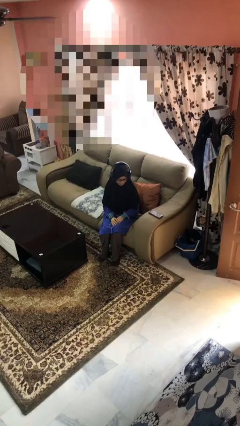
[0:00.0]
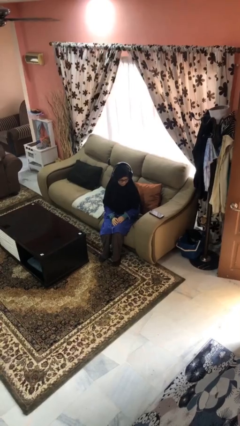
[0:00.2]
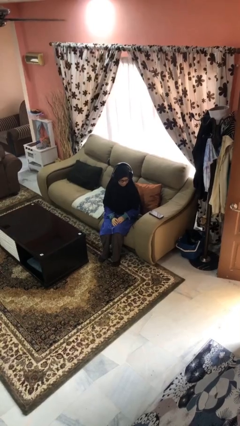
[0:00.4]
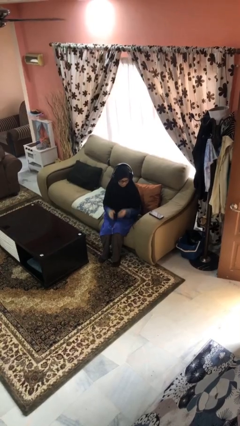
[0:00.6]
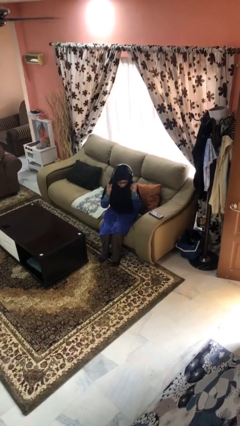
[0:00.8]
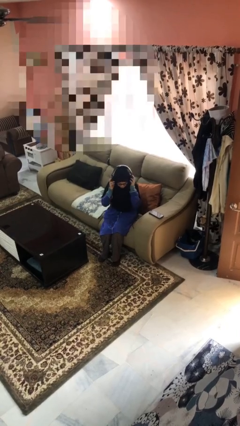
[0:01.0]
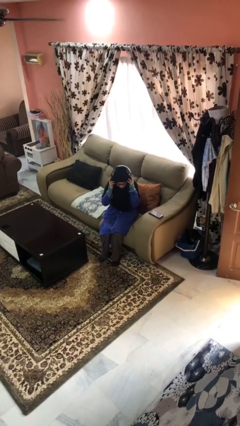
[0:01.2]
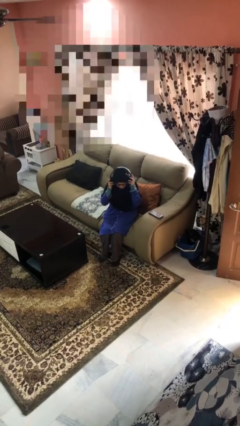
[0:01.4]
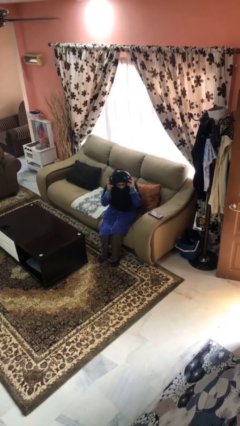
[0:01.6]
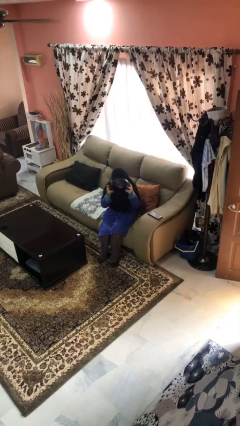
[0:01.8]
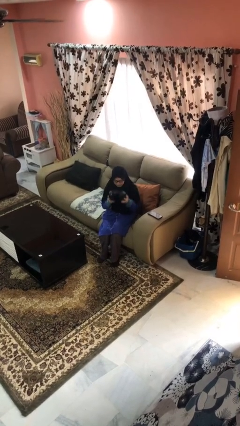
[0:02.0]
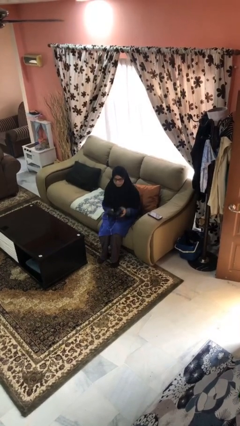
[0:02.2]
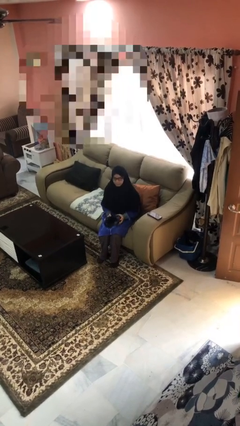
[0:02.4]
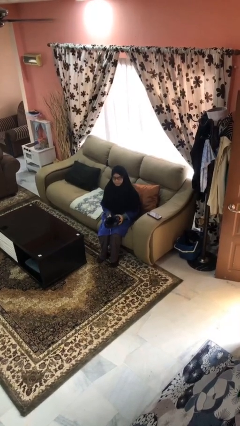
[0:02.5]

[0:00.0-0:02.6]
person takes off headphones

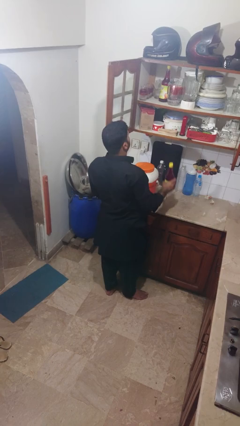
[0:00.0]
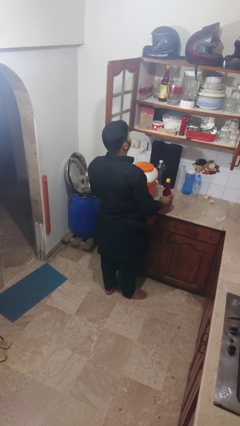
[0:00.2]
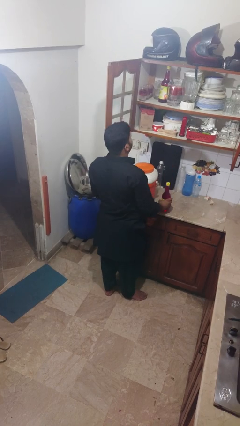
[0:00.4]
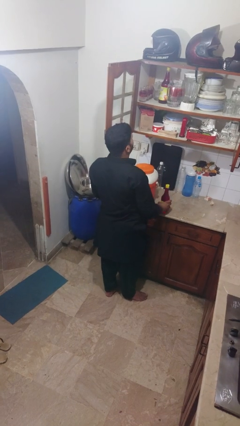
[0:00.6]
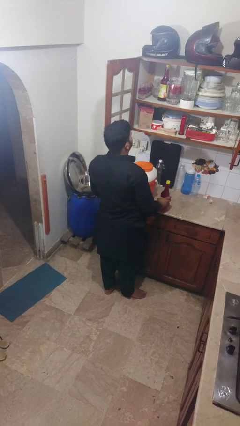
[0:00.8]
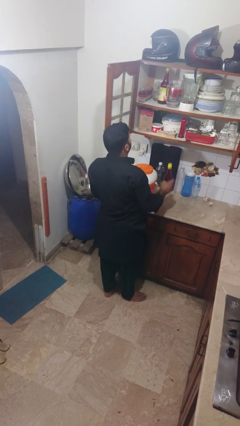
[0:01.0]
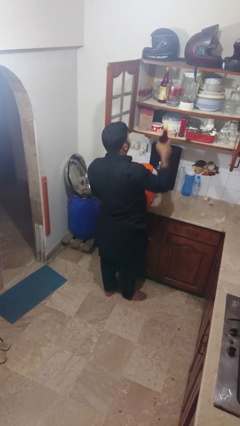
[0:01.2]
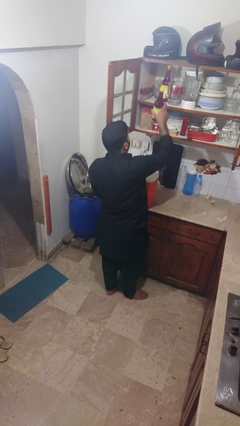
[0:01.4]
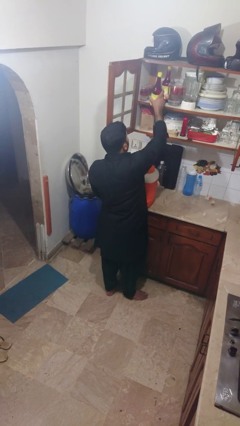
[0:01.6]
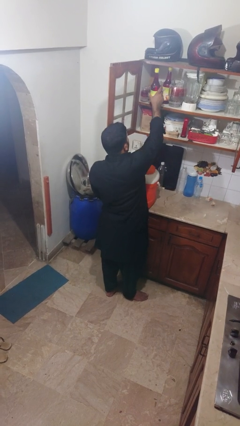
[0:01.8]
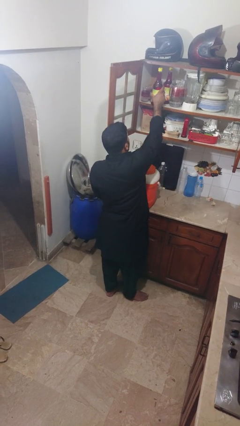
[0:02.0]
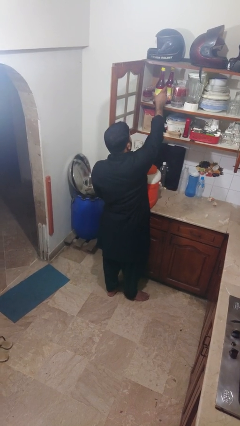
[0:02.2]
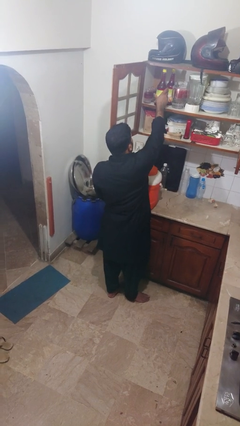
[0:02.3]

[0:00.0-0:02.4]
person puts down object into cabinet

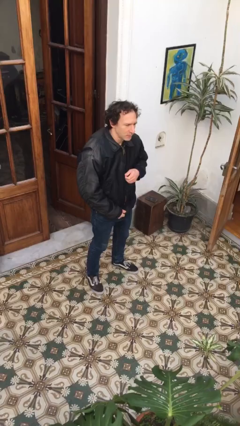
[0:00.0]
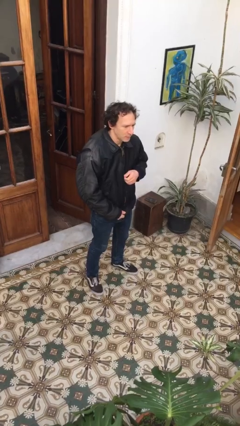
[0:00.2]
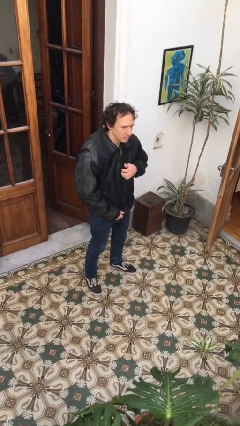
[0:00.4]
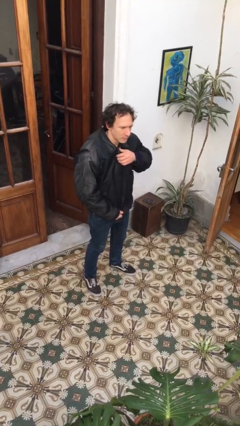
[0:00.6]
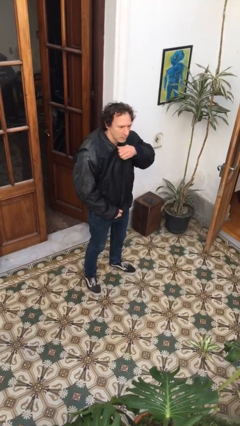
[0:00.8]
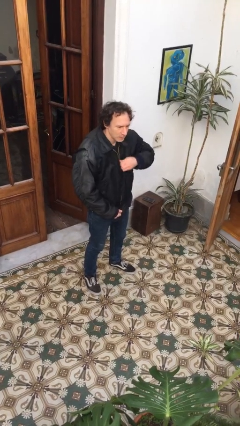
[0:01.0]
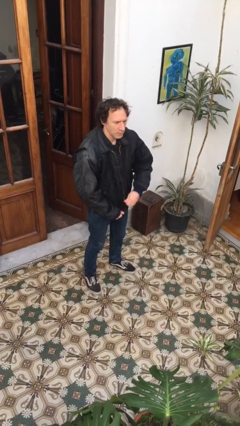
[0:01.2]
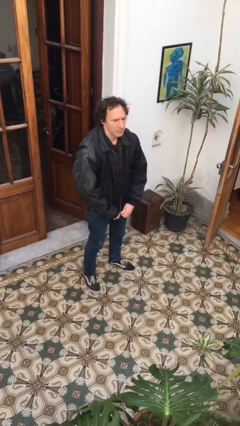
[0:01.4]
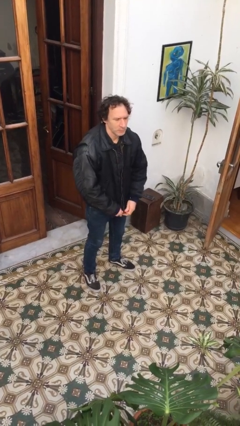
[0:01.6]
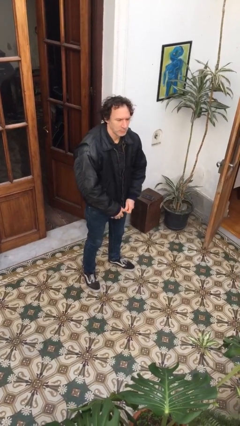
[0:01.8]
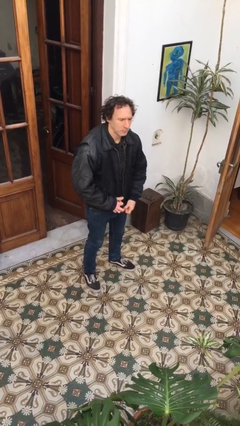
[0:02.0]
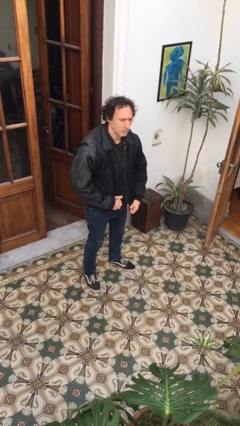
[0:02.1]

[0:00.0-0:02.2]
person unzips jacket

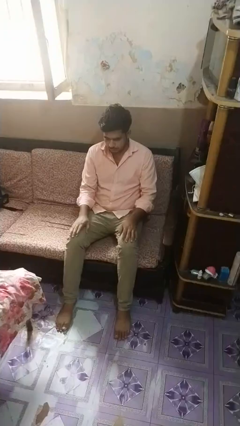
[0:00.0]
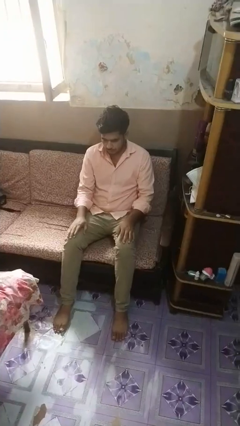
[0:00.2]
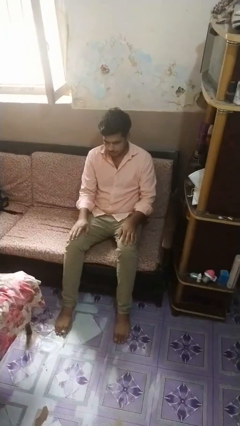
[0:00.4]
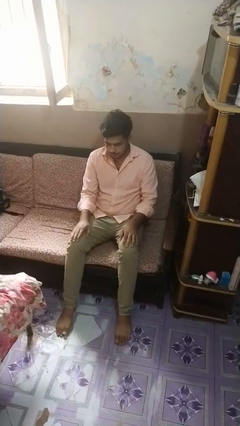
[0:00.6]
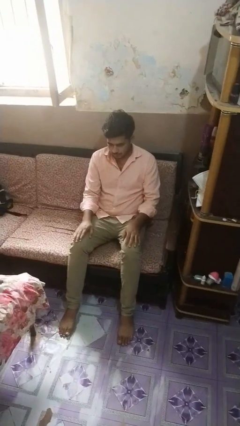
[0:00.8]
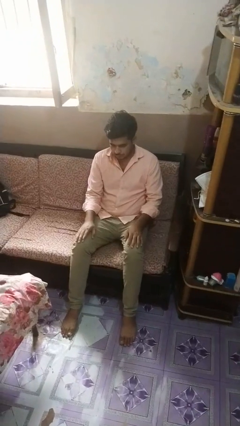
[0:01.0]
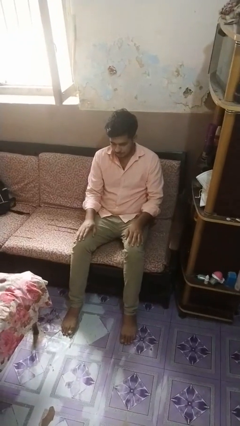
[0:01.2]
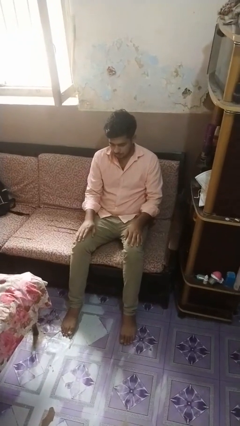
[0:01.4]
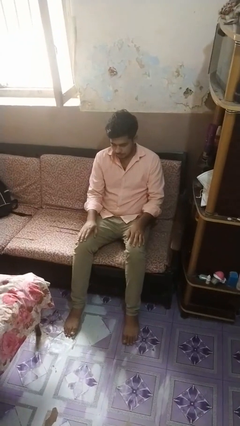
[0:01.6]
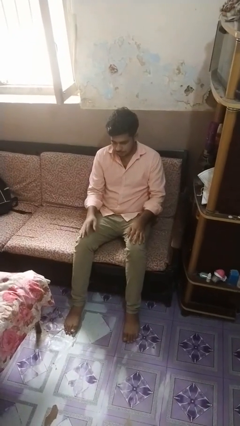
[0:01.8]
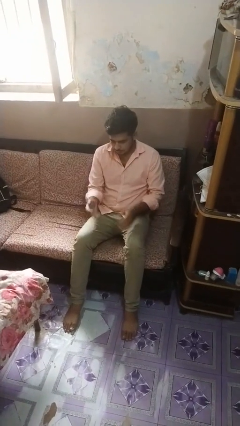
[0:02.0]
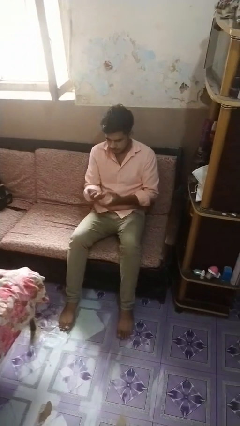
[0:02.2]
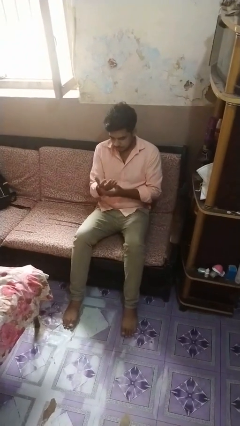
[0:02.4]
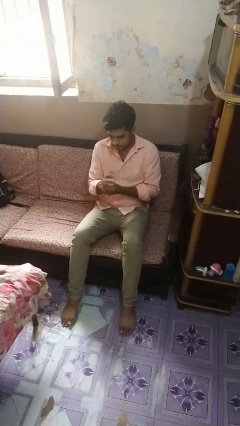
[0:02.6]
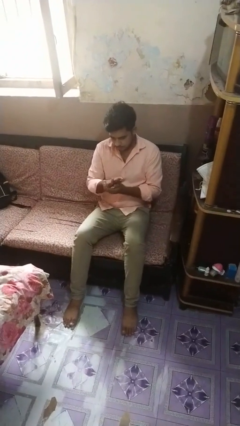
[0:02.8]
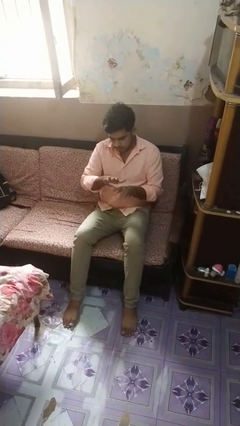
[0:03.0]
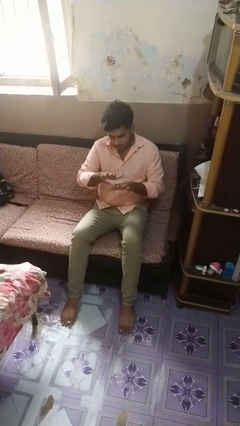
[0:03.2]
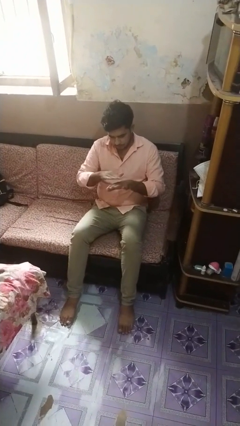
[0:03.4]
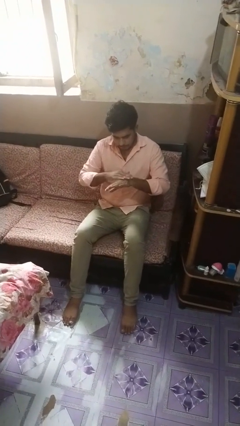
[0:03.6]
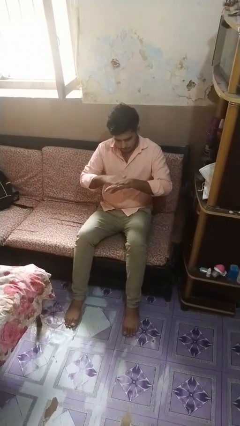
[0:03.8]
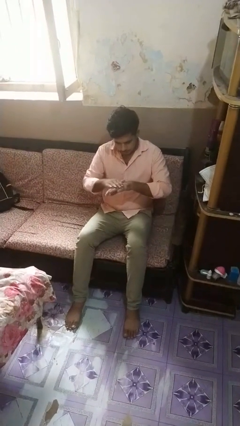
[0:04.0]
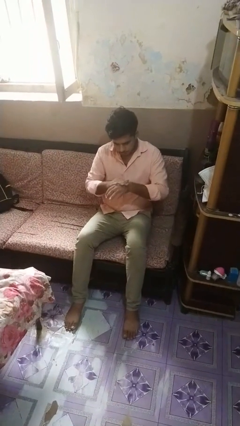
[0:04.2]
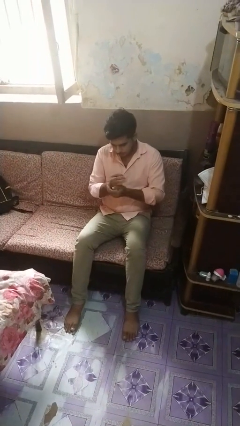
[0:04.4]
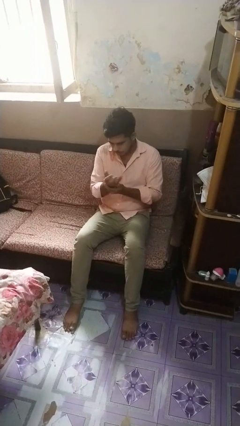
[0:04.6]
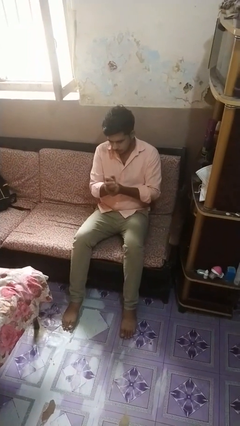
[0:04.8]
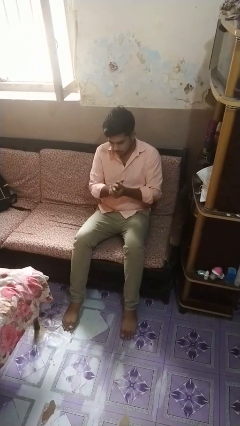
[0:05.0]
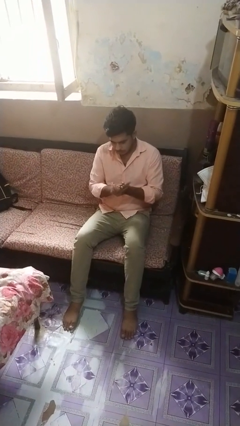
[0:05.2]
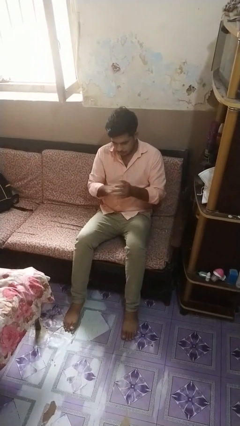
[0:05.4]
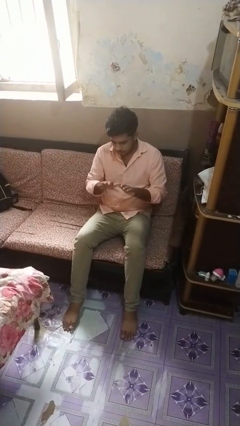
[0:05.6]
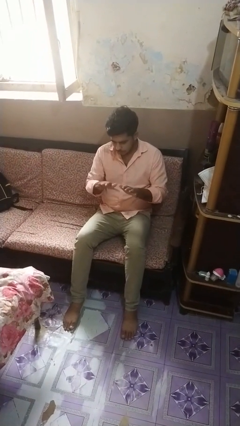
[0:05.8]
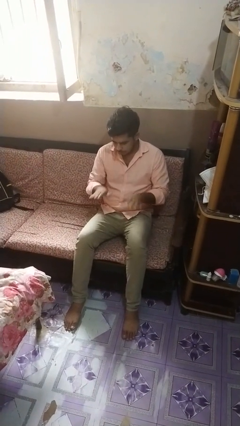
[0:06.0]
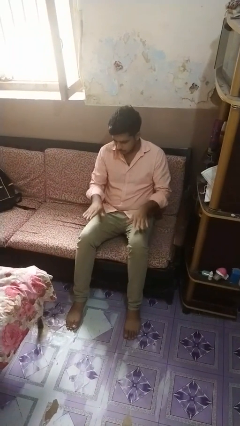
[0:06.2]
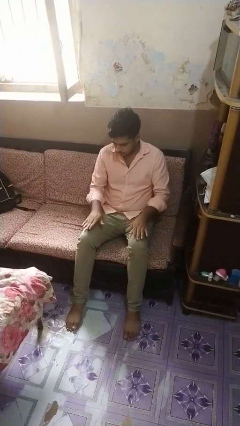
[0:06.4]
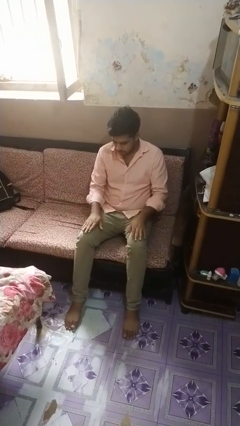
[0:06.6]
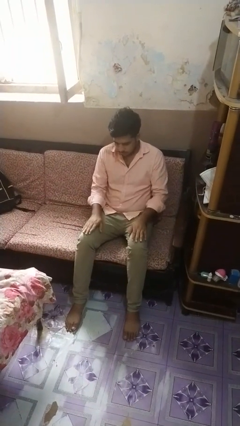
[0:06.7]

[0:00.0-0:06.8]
person looks at hands in lap

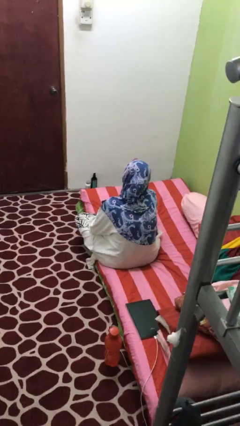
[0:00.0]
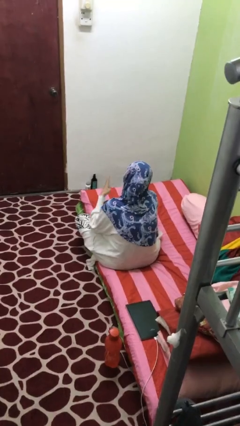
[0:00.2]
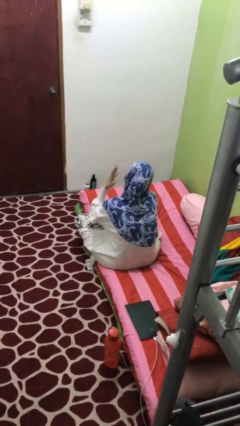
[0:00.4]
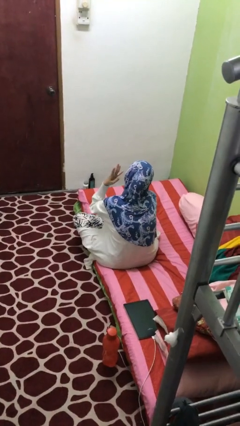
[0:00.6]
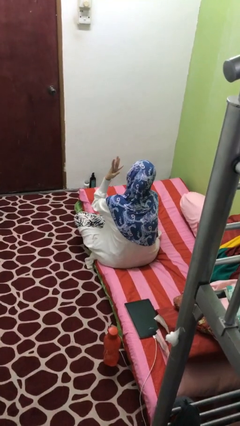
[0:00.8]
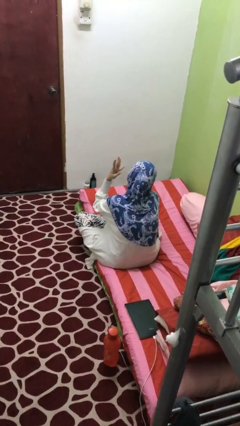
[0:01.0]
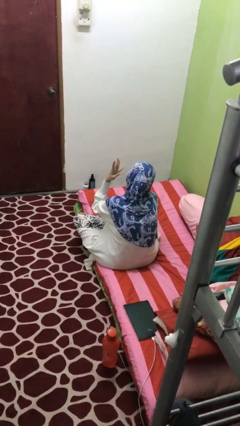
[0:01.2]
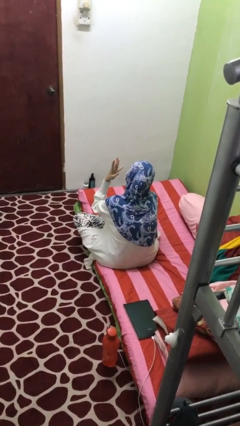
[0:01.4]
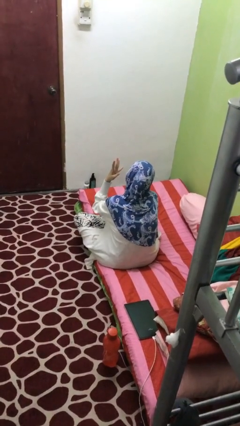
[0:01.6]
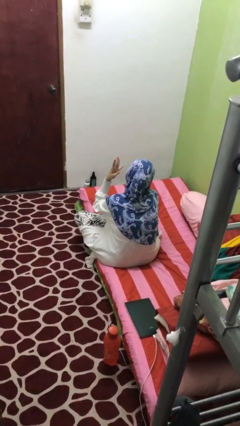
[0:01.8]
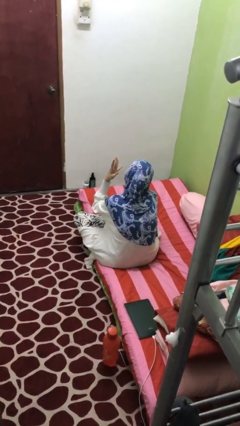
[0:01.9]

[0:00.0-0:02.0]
person gestures number four

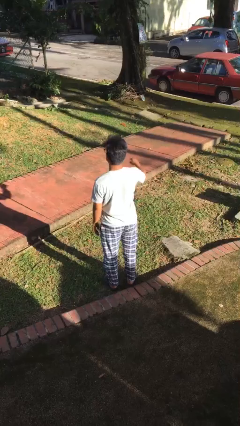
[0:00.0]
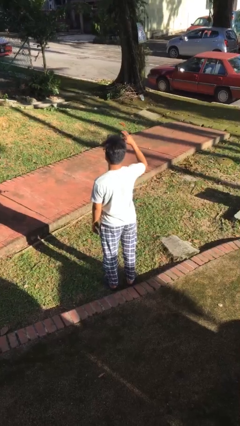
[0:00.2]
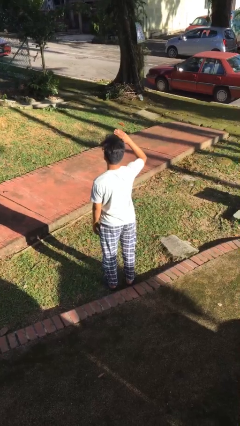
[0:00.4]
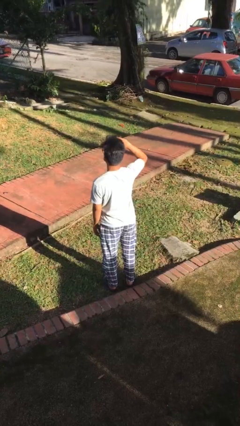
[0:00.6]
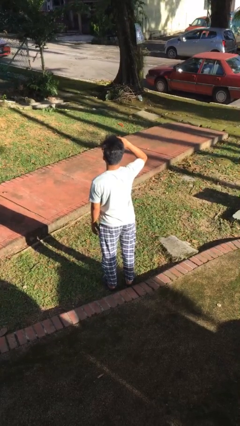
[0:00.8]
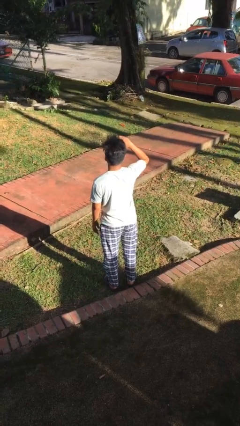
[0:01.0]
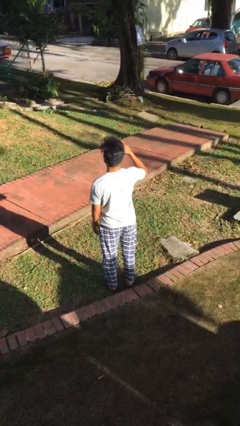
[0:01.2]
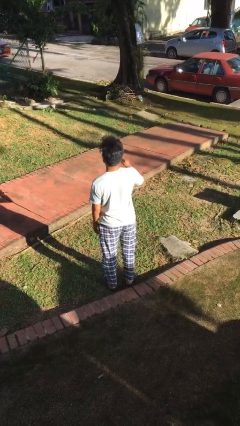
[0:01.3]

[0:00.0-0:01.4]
person salutes
